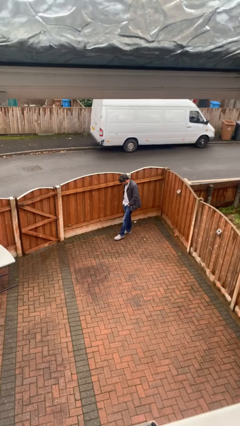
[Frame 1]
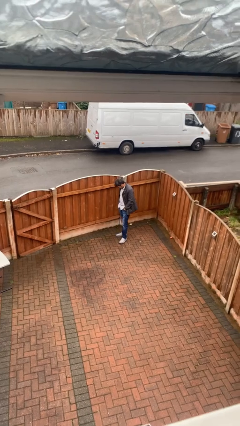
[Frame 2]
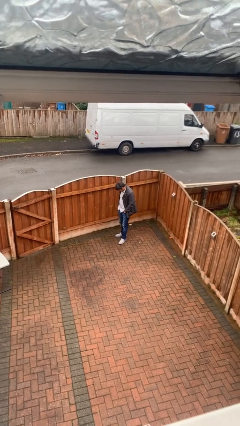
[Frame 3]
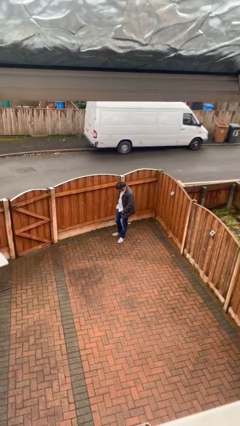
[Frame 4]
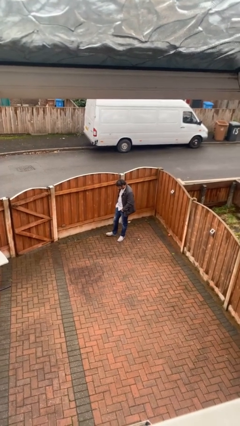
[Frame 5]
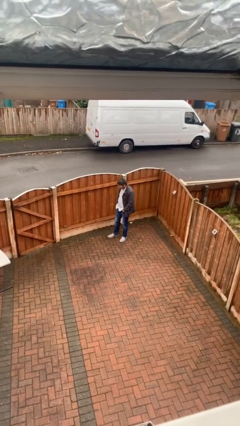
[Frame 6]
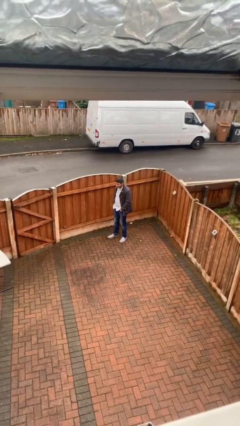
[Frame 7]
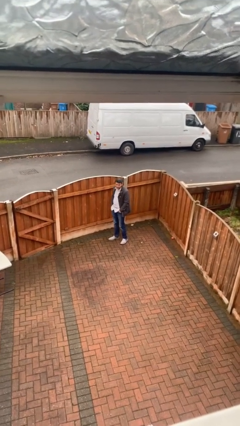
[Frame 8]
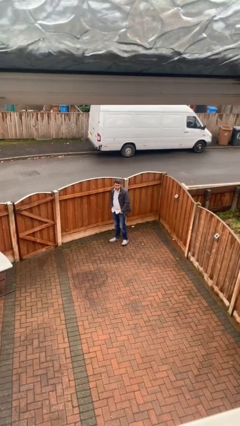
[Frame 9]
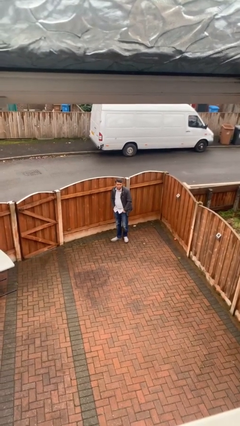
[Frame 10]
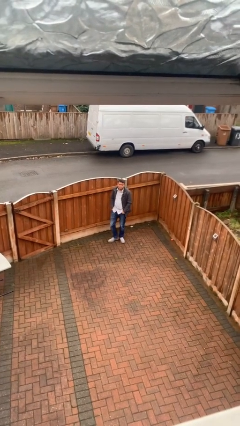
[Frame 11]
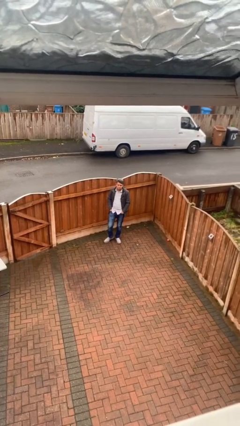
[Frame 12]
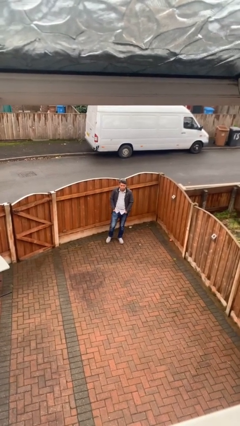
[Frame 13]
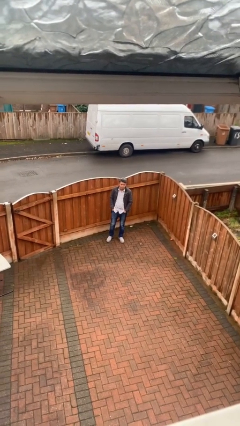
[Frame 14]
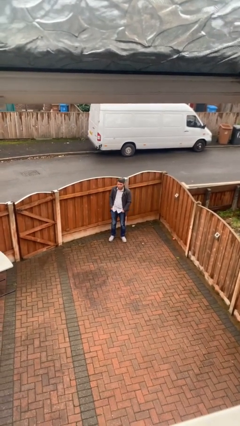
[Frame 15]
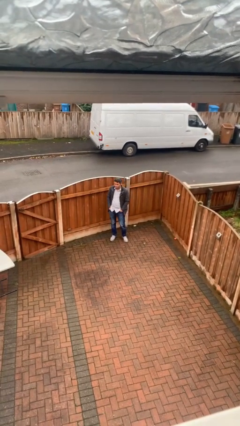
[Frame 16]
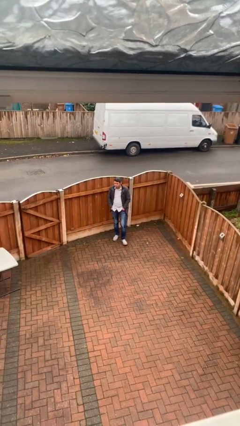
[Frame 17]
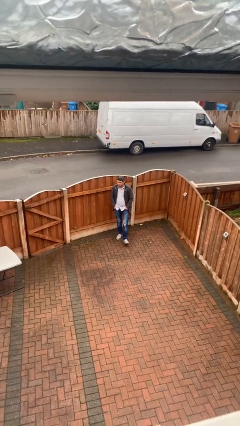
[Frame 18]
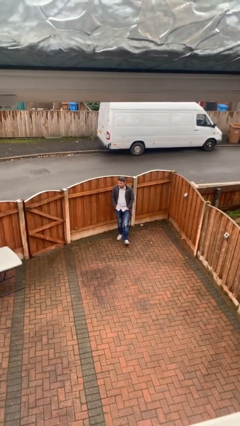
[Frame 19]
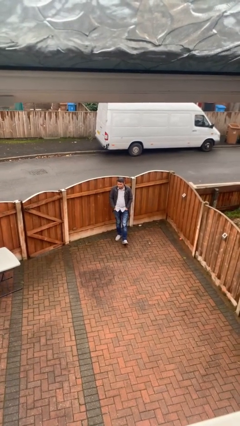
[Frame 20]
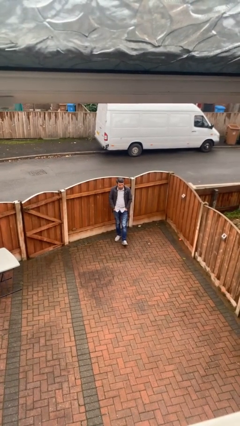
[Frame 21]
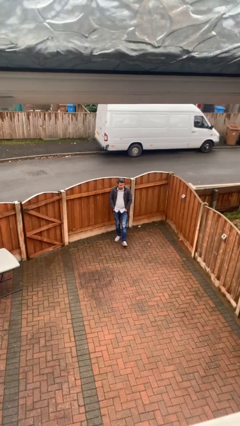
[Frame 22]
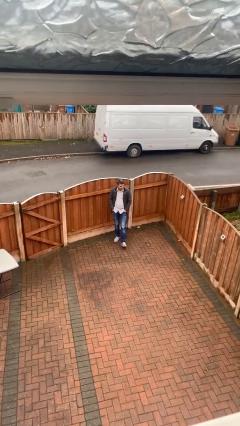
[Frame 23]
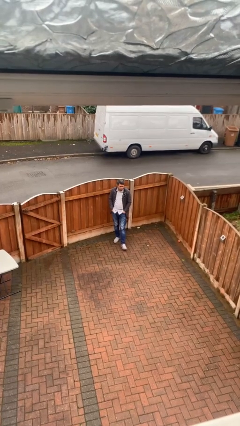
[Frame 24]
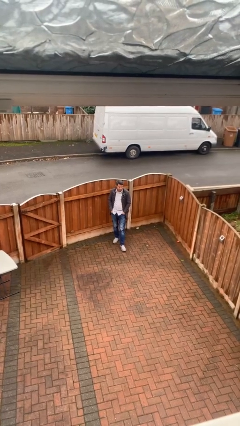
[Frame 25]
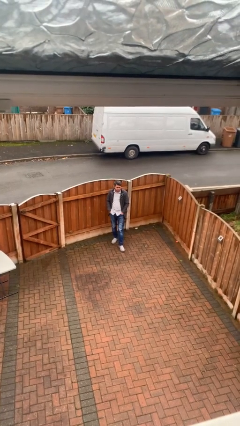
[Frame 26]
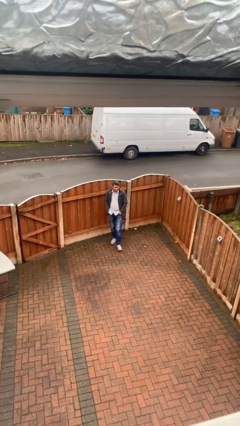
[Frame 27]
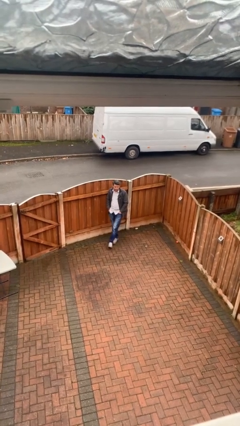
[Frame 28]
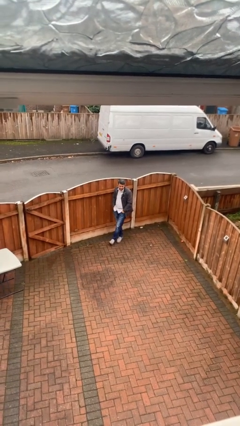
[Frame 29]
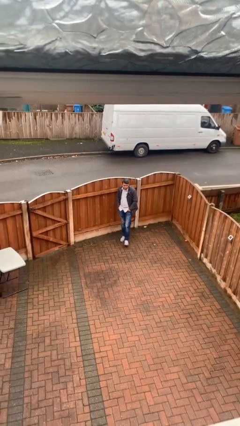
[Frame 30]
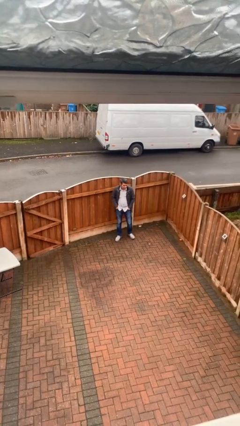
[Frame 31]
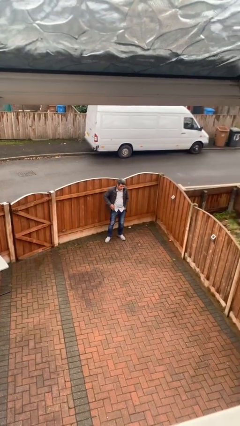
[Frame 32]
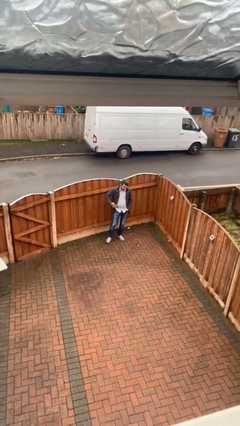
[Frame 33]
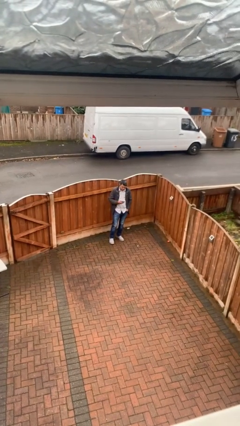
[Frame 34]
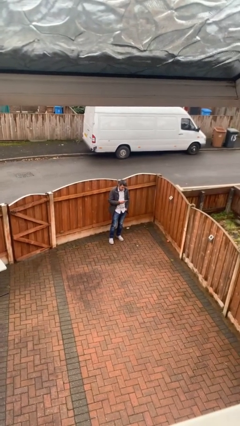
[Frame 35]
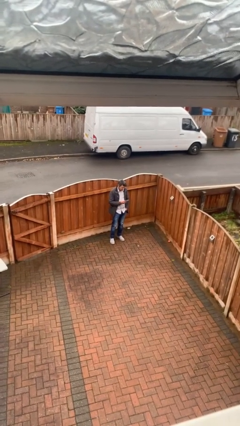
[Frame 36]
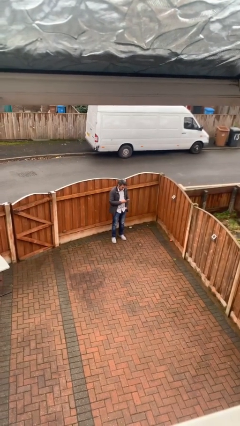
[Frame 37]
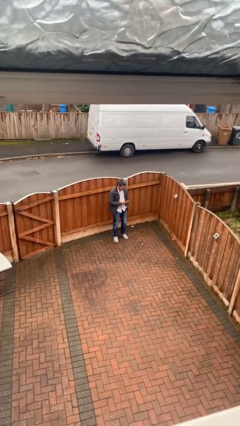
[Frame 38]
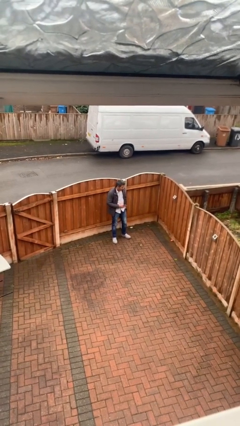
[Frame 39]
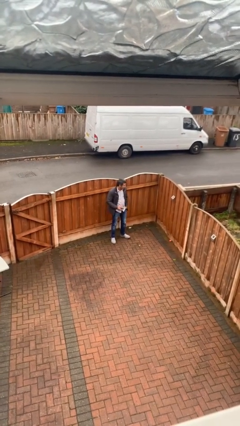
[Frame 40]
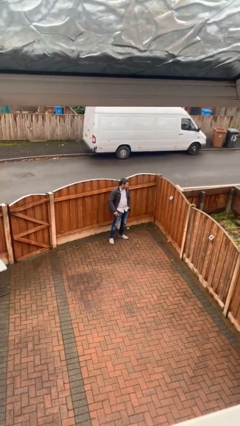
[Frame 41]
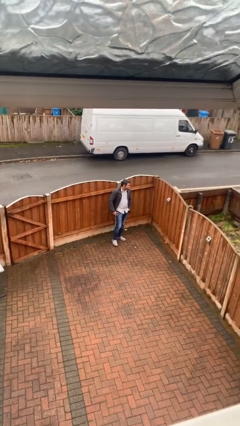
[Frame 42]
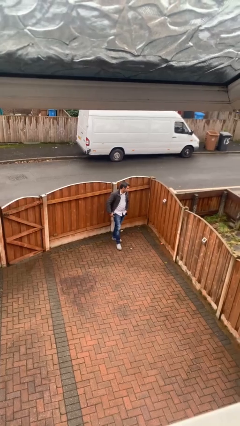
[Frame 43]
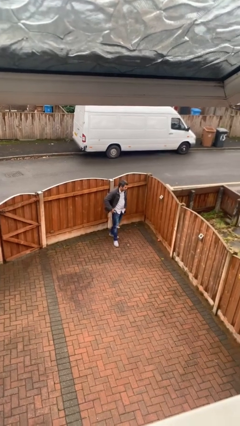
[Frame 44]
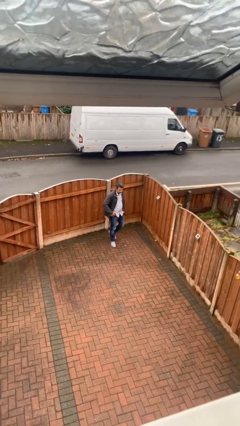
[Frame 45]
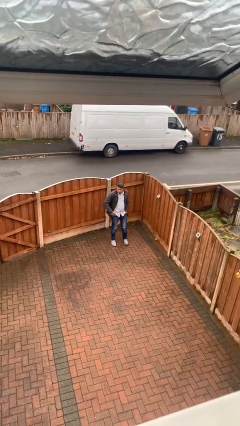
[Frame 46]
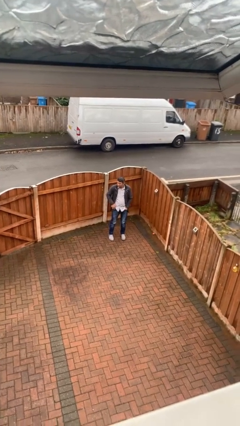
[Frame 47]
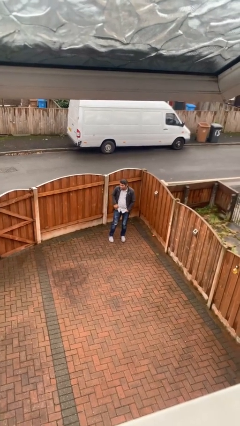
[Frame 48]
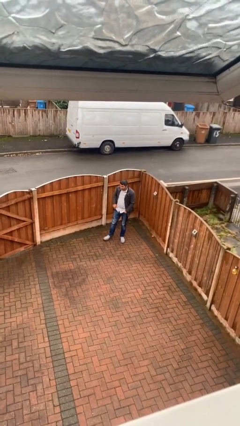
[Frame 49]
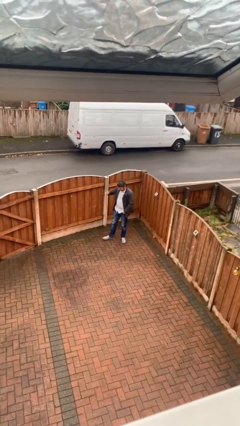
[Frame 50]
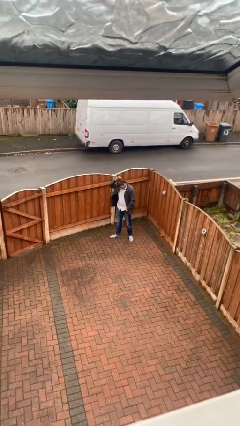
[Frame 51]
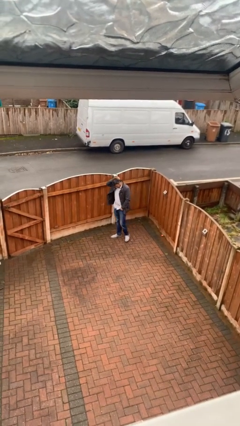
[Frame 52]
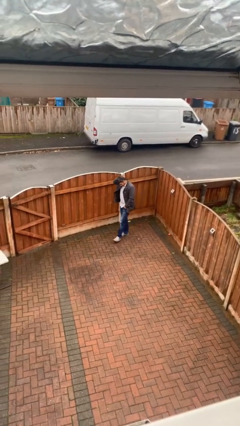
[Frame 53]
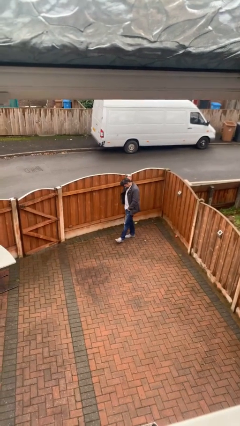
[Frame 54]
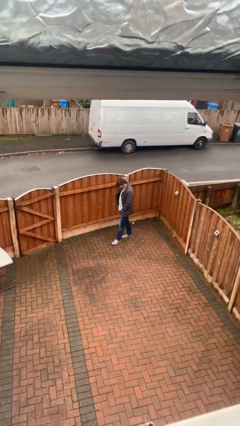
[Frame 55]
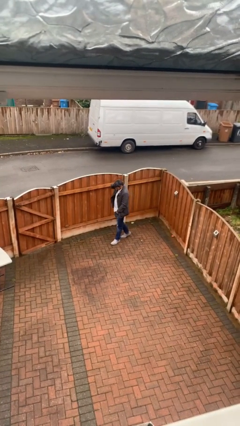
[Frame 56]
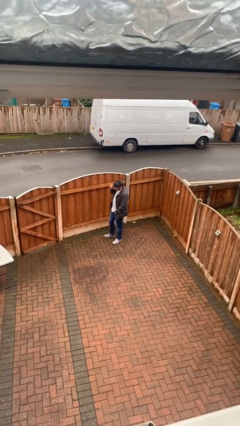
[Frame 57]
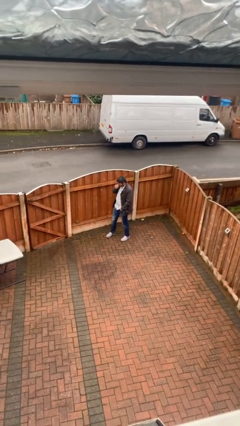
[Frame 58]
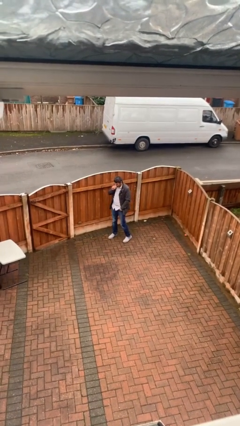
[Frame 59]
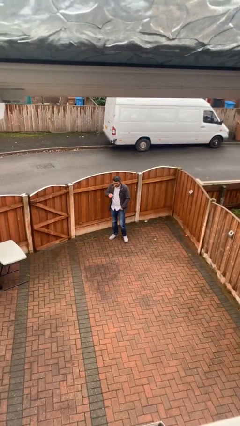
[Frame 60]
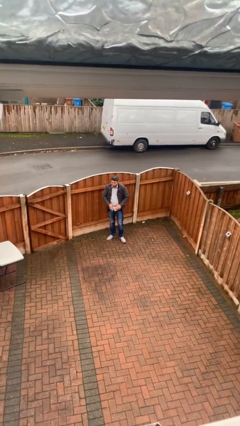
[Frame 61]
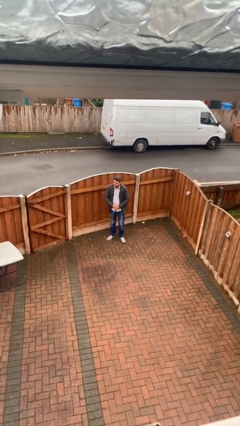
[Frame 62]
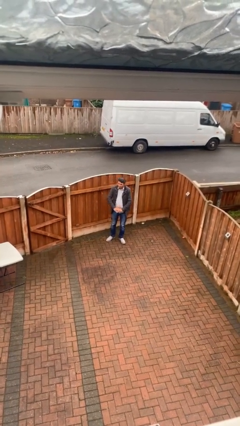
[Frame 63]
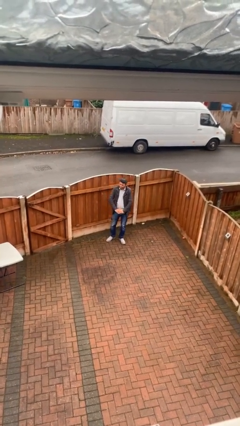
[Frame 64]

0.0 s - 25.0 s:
person walks

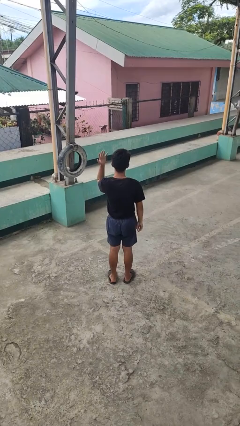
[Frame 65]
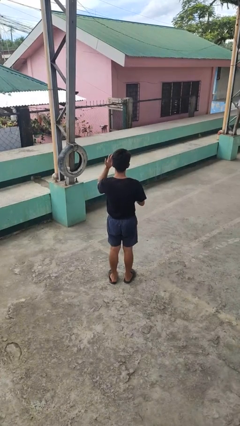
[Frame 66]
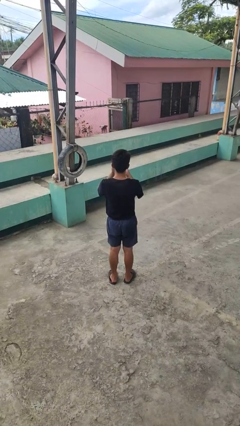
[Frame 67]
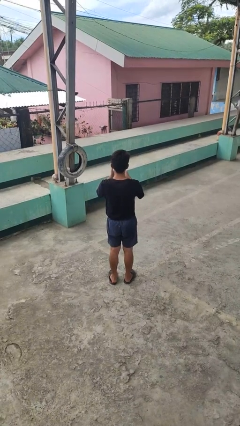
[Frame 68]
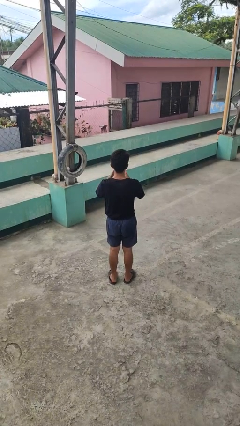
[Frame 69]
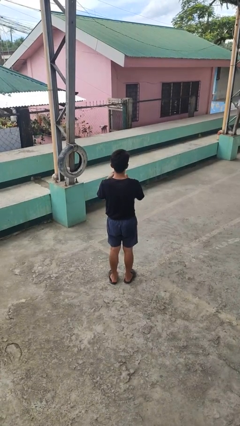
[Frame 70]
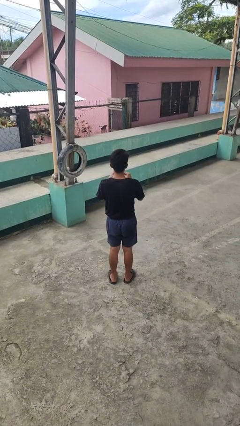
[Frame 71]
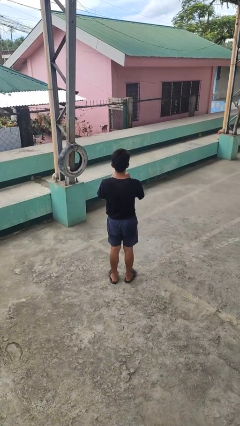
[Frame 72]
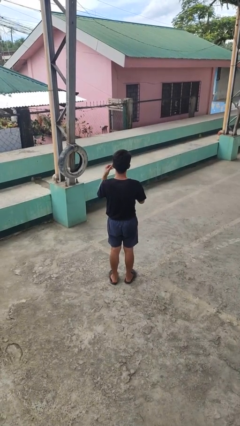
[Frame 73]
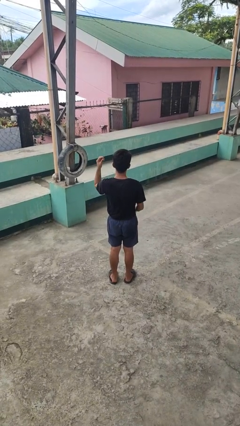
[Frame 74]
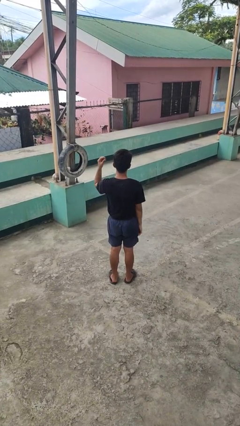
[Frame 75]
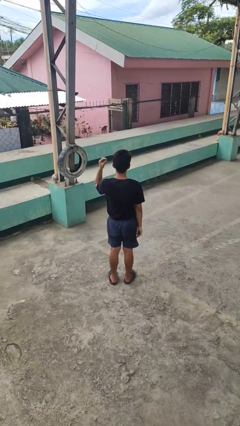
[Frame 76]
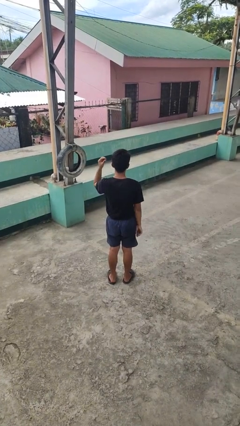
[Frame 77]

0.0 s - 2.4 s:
person takes off ring

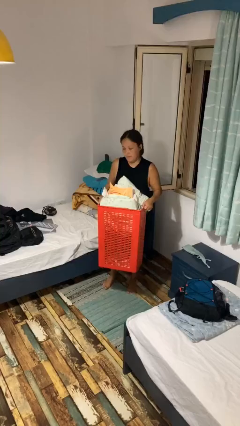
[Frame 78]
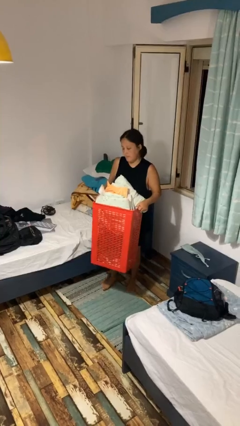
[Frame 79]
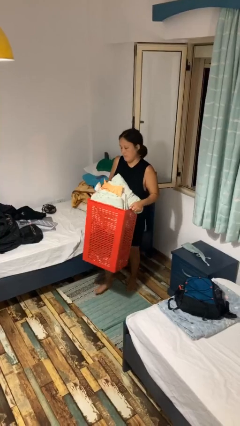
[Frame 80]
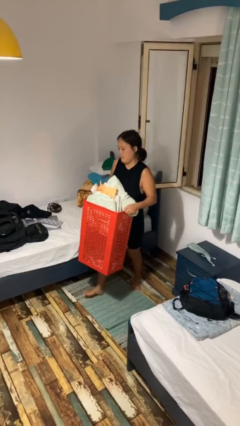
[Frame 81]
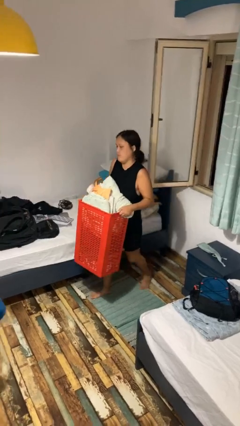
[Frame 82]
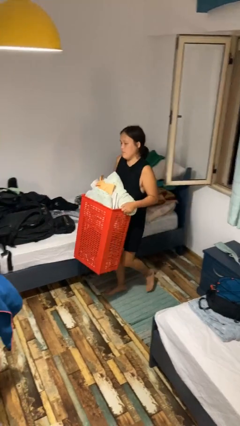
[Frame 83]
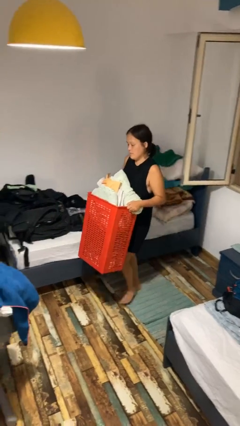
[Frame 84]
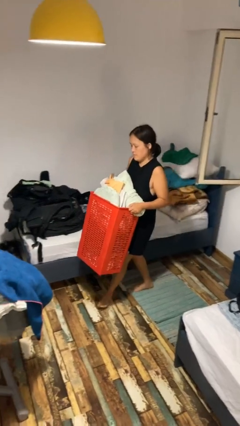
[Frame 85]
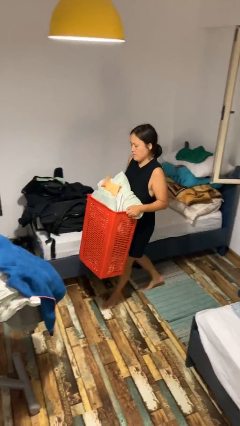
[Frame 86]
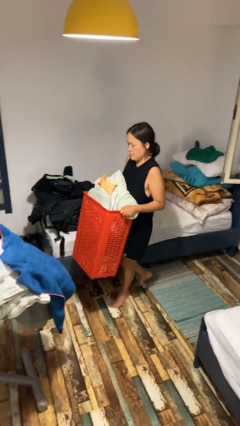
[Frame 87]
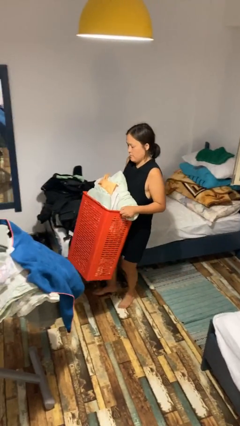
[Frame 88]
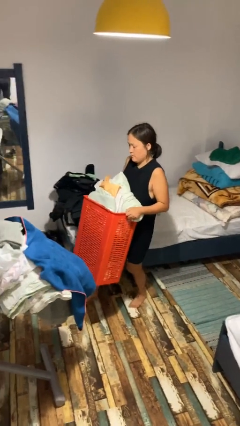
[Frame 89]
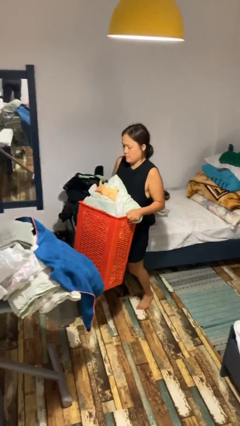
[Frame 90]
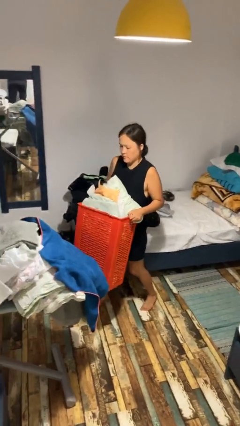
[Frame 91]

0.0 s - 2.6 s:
person carries laundry basket
